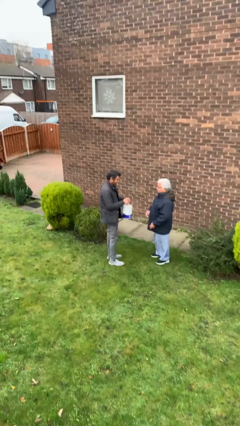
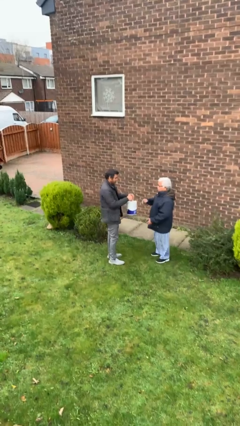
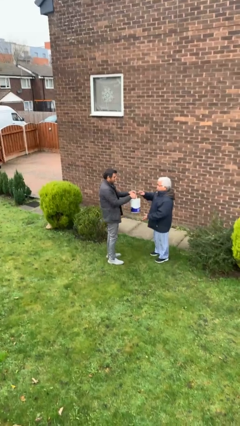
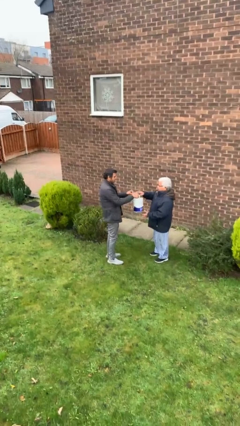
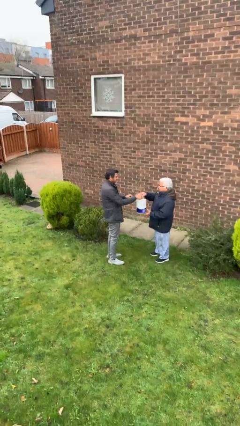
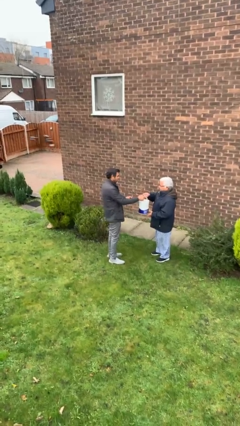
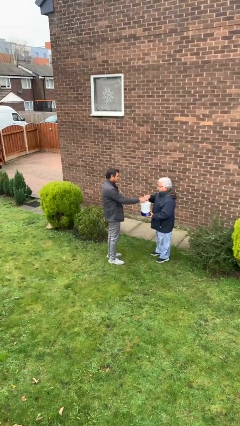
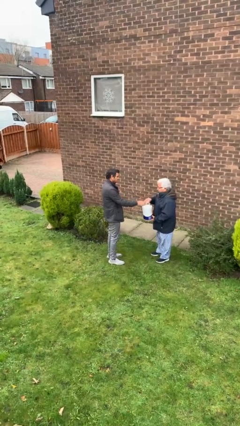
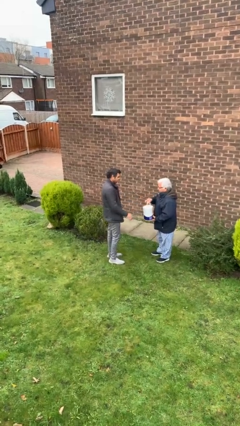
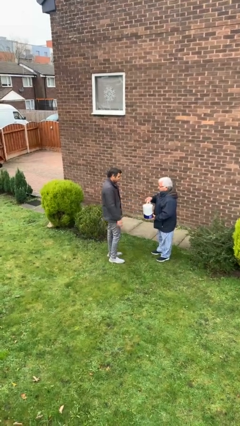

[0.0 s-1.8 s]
person transfers object to person

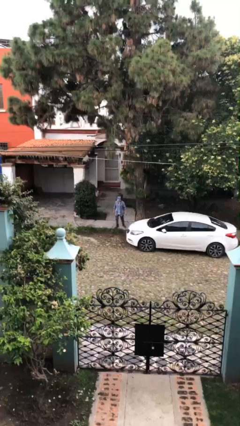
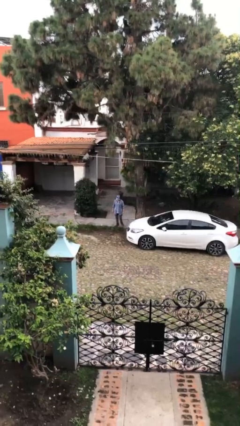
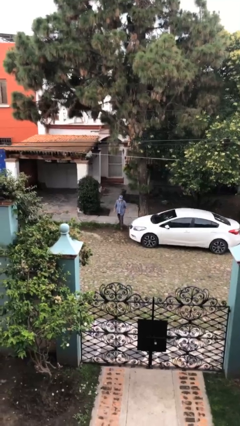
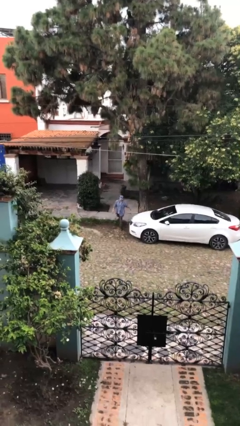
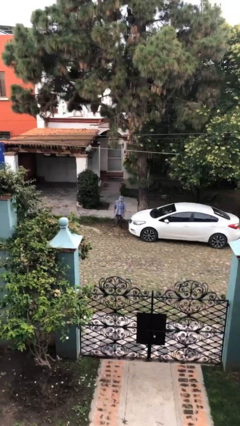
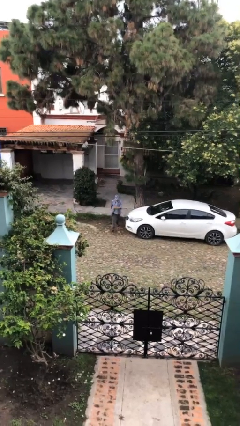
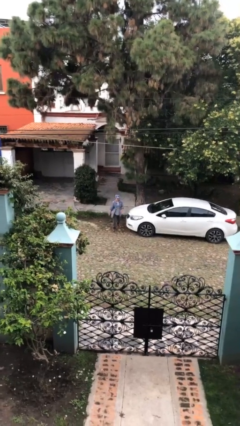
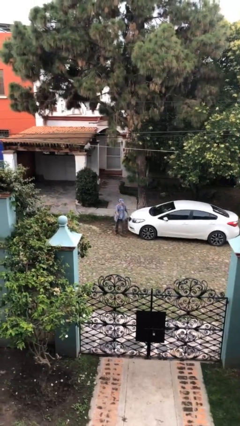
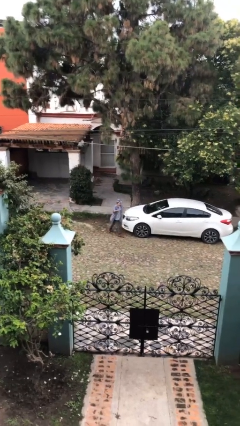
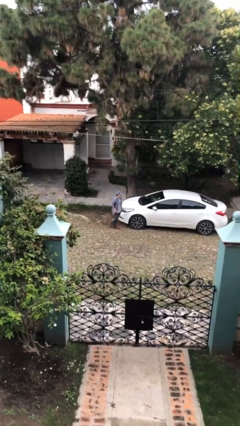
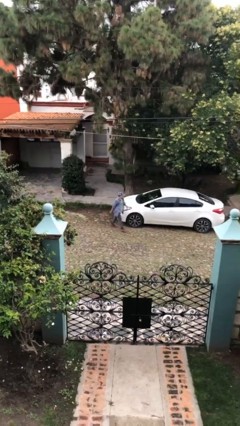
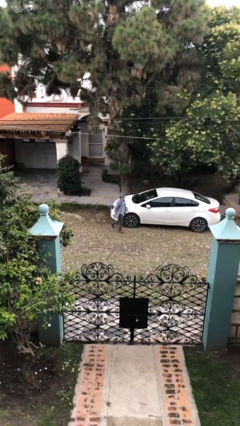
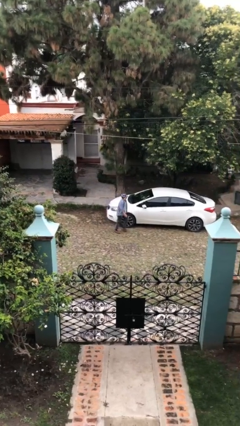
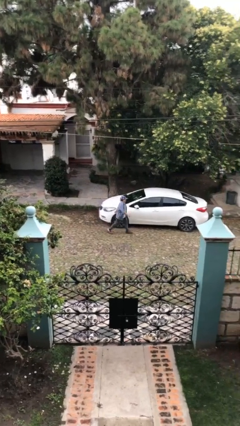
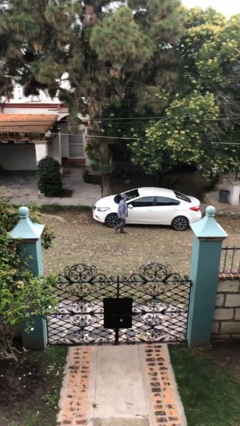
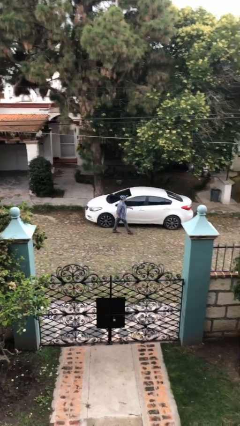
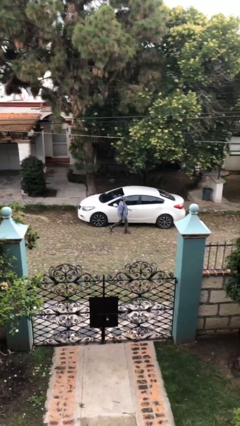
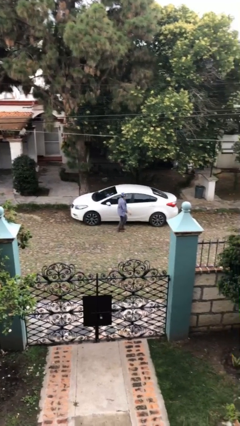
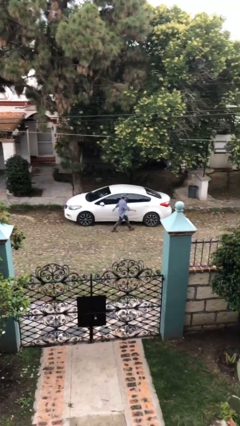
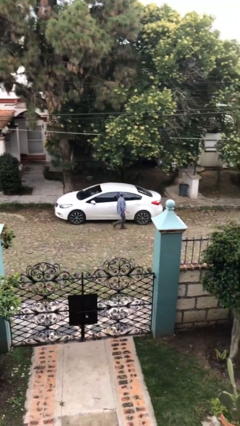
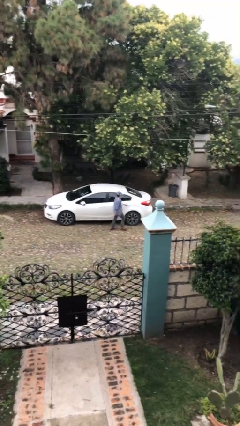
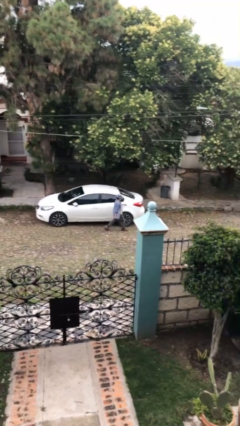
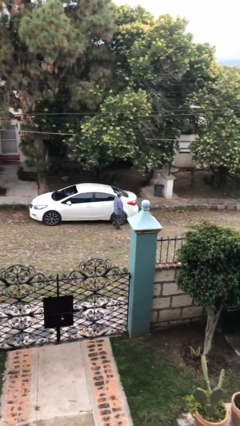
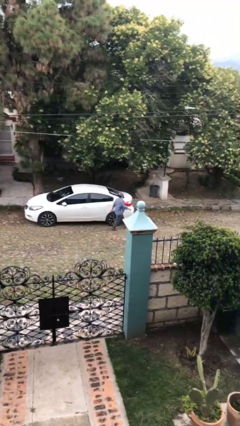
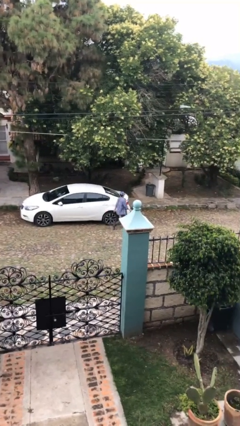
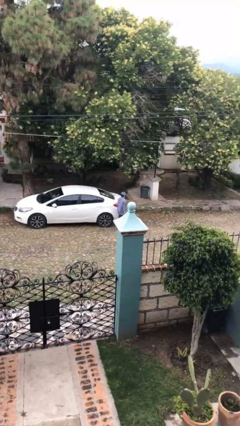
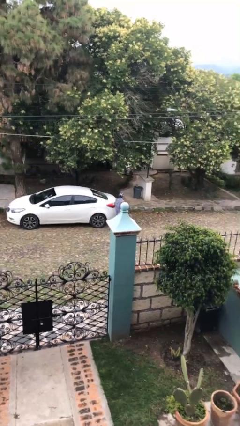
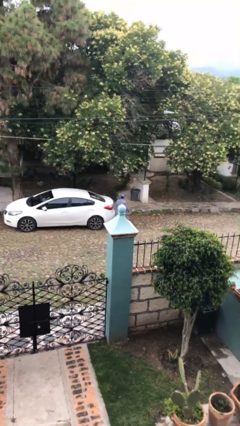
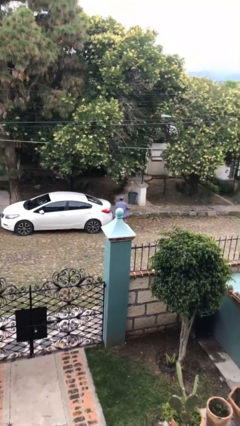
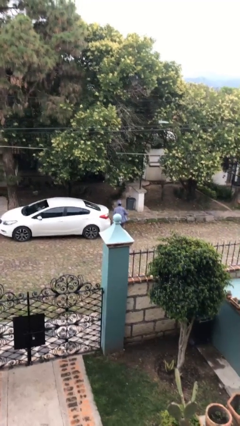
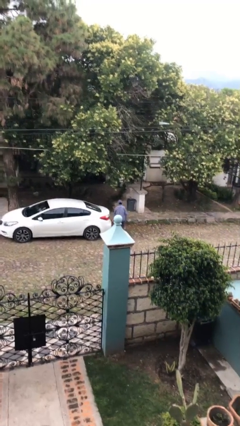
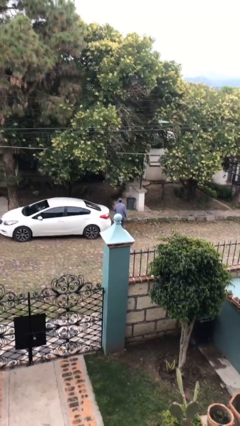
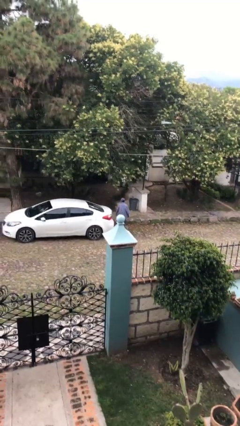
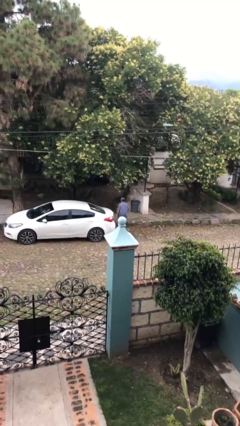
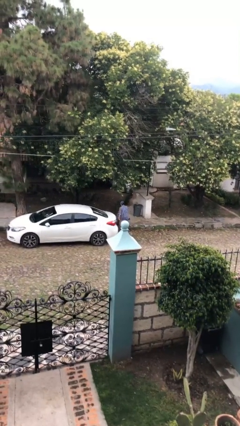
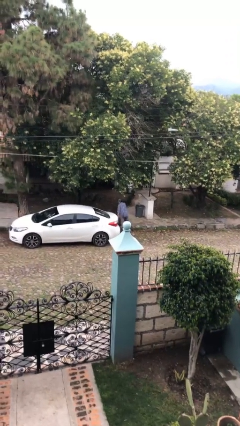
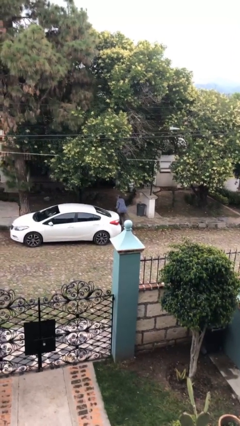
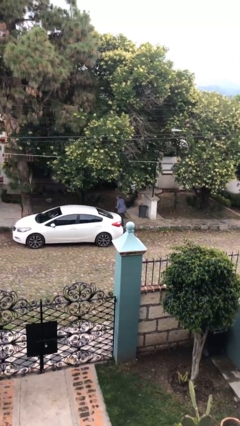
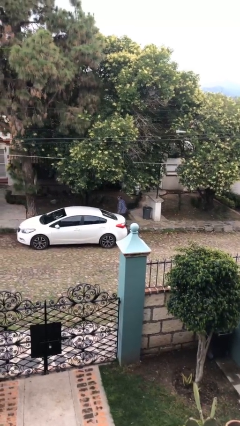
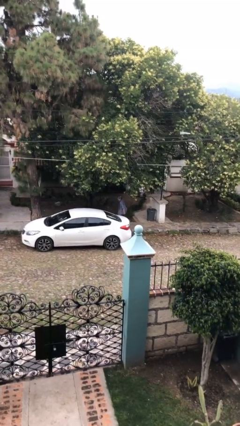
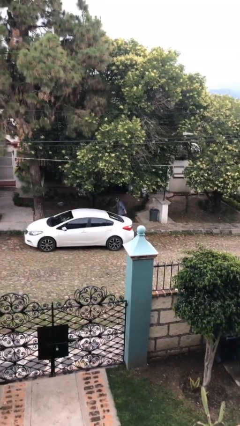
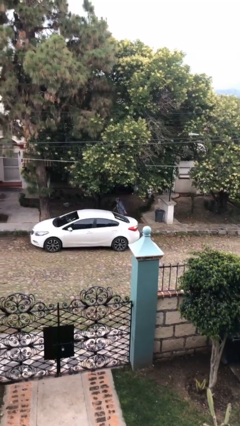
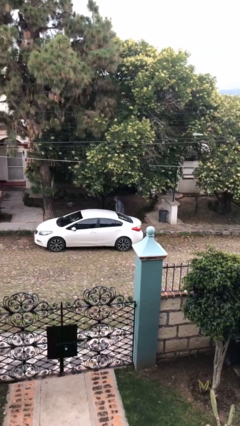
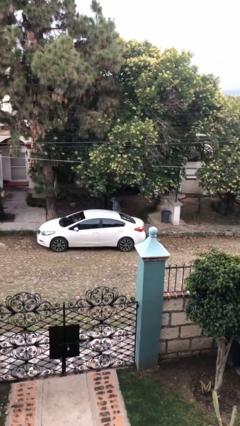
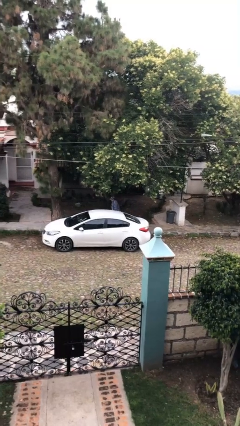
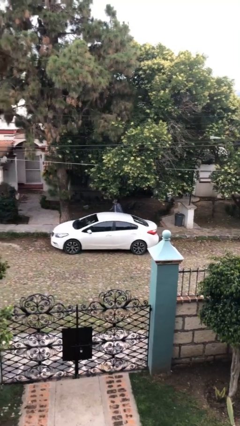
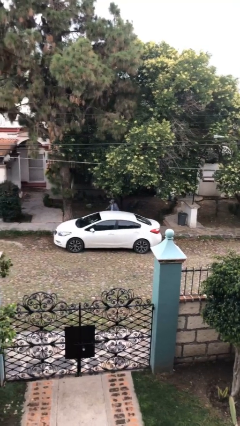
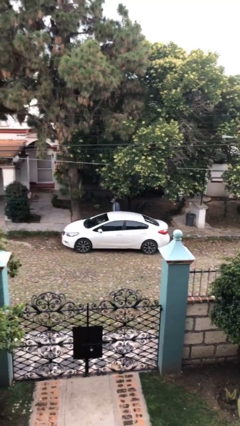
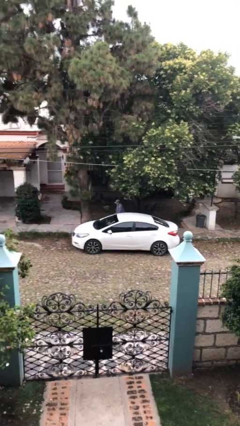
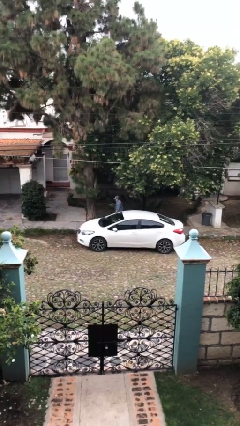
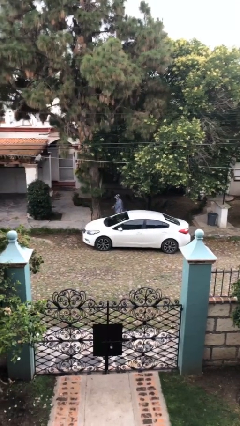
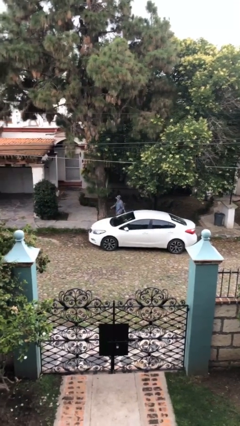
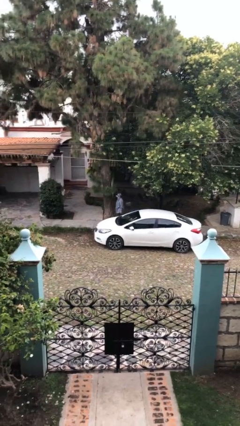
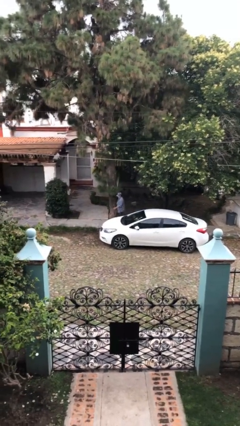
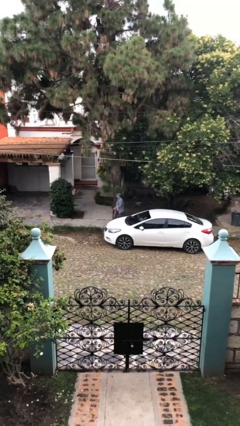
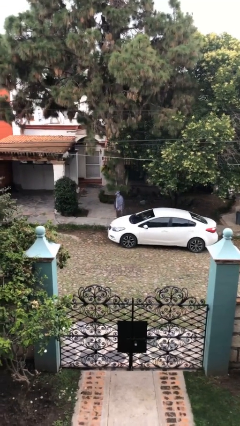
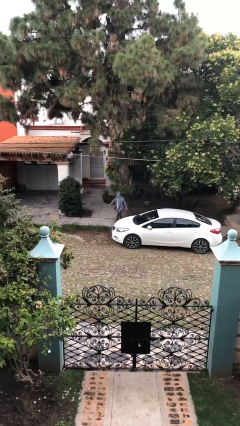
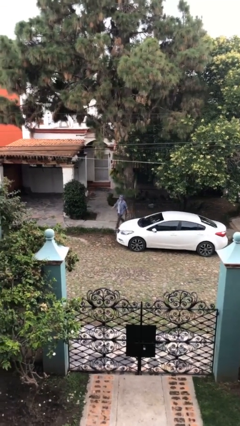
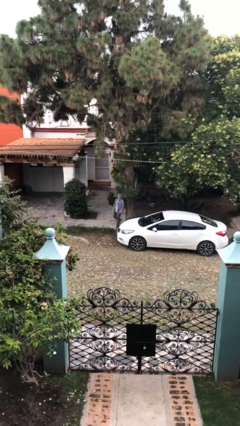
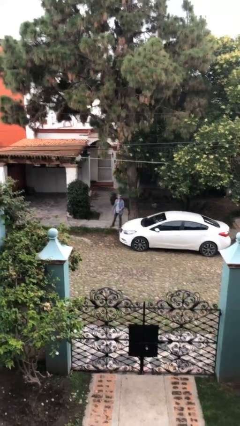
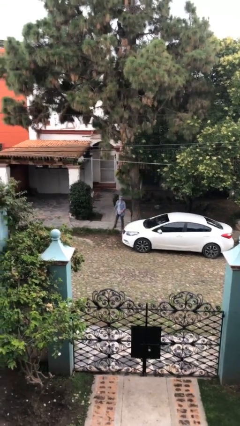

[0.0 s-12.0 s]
person walks around car

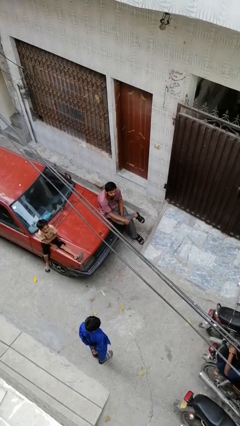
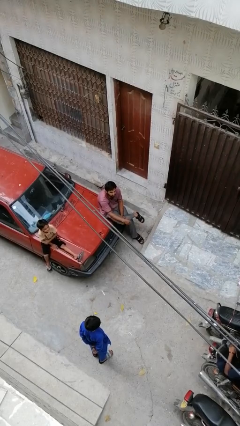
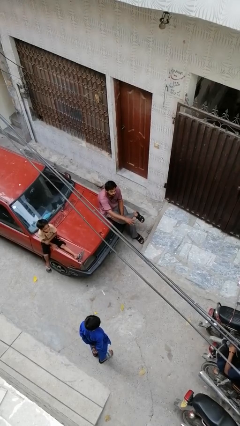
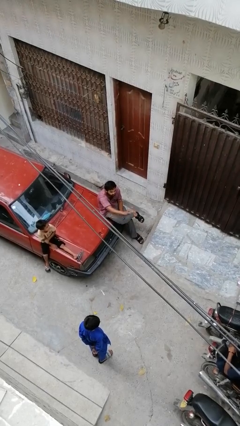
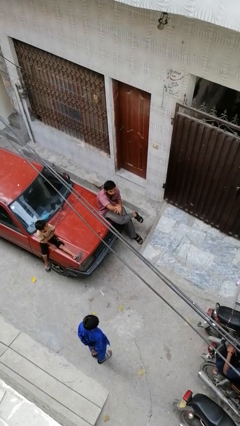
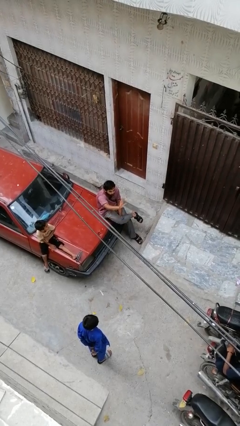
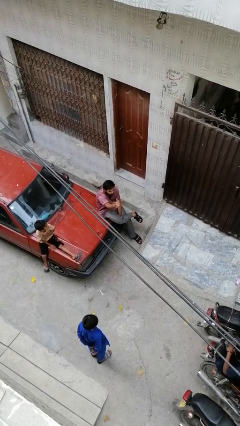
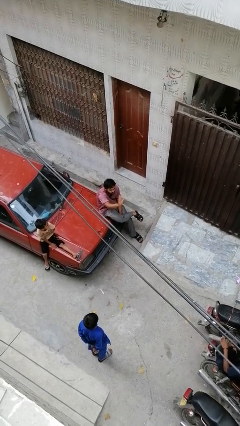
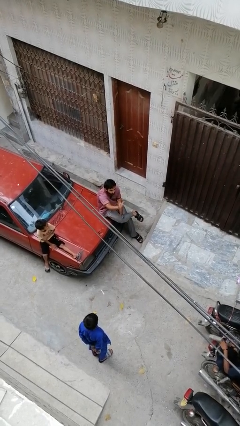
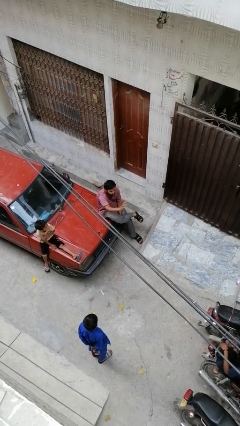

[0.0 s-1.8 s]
person waves at person

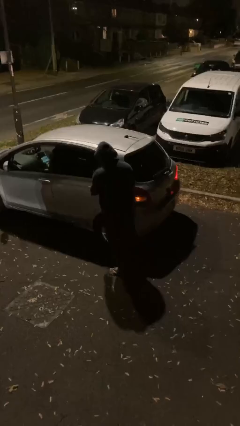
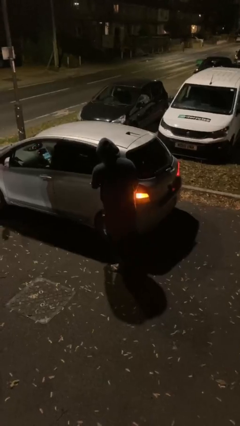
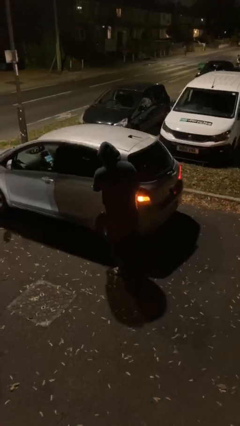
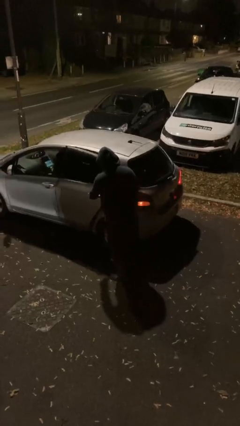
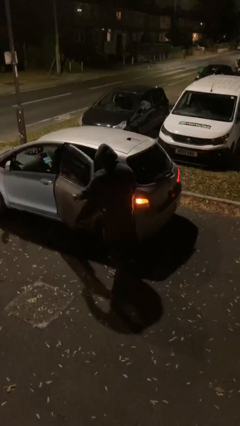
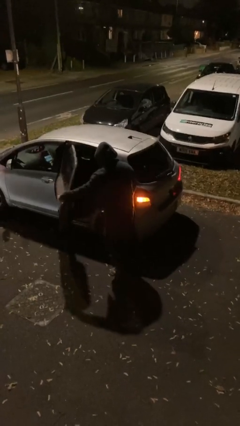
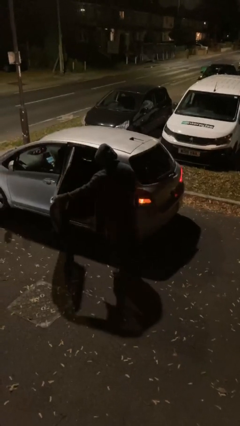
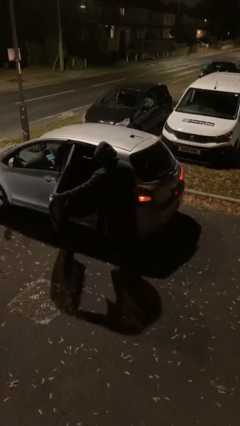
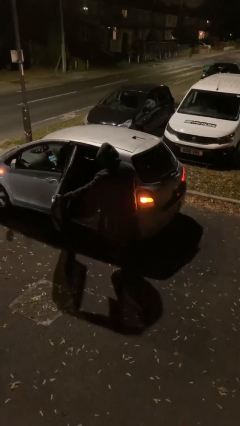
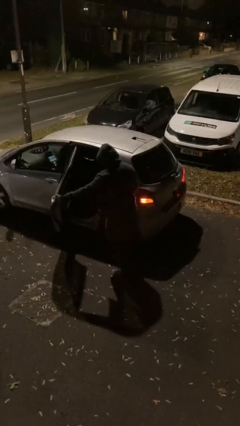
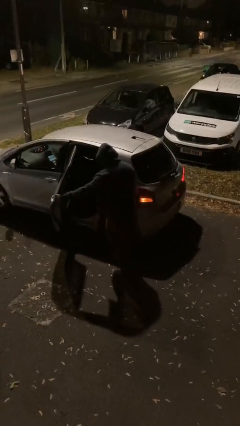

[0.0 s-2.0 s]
person opens car door

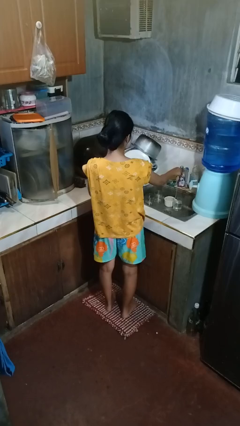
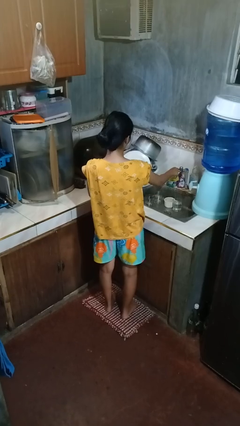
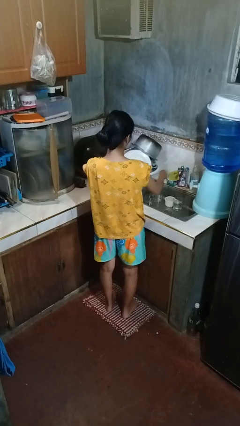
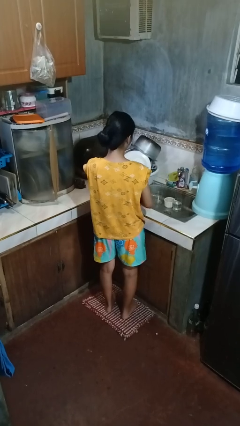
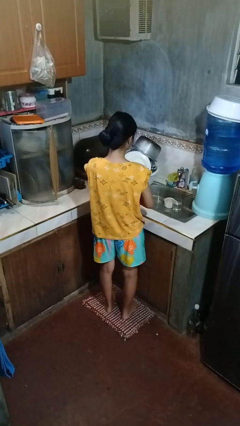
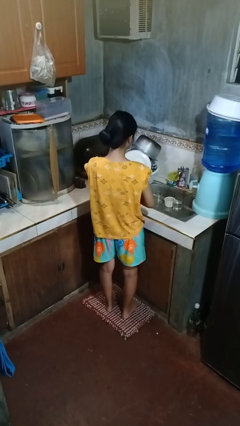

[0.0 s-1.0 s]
person turns off faucet
